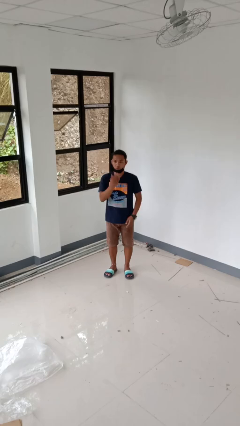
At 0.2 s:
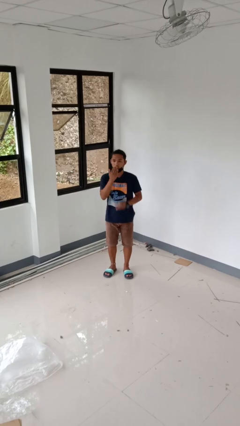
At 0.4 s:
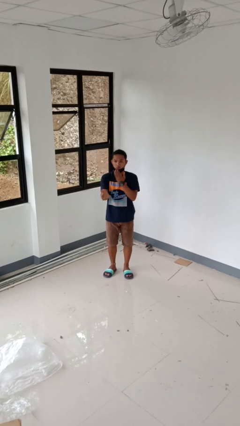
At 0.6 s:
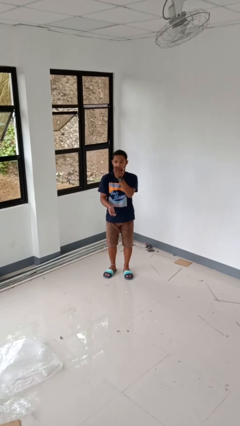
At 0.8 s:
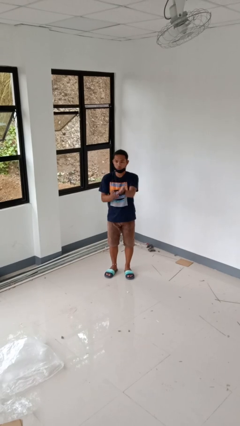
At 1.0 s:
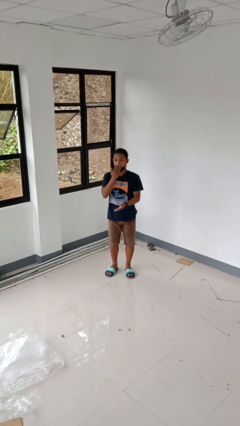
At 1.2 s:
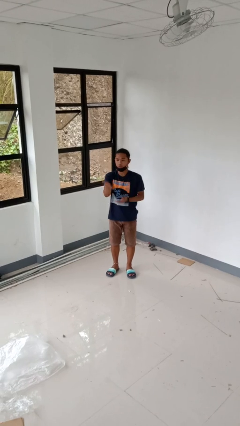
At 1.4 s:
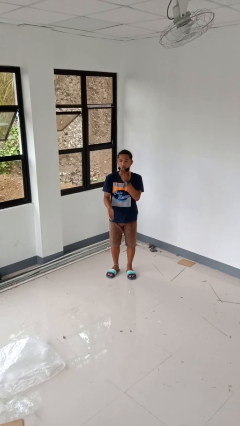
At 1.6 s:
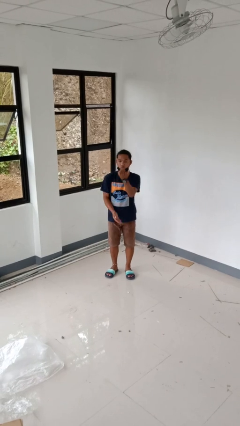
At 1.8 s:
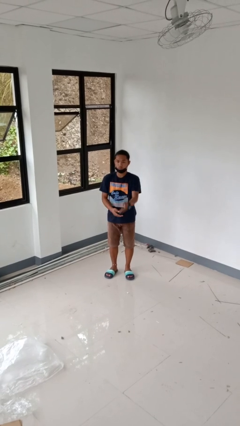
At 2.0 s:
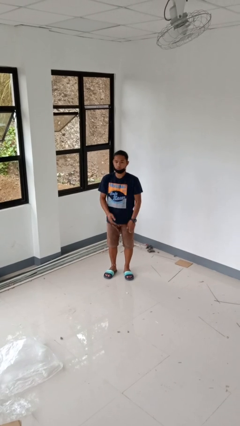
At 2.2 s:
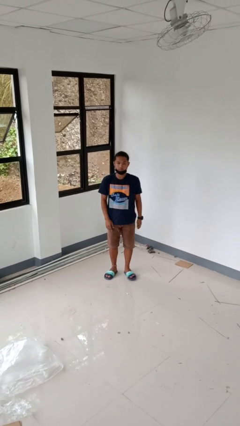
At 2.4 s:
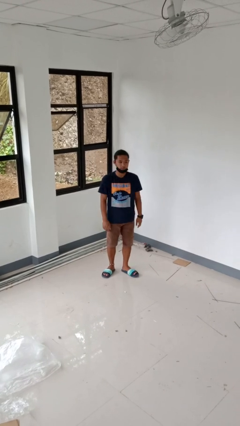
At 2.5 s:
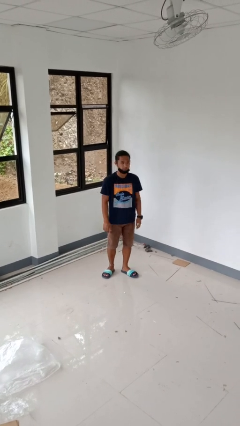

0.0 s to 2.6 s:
person gestures blow kiss

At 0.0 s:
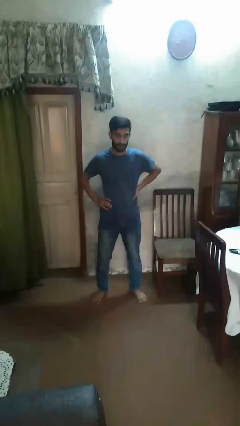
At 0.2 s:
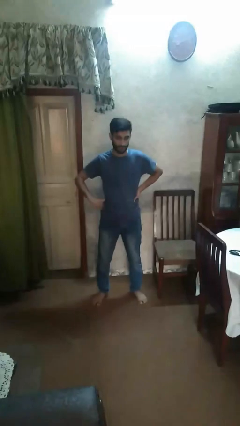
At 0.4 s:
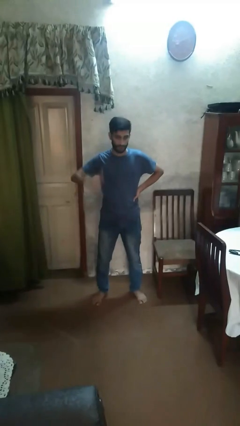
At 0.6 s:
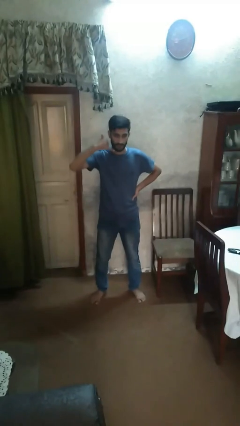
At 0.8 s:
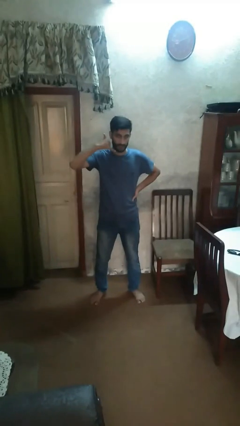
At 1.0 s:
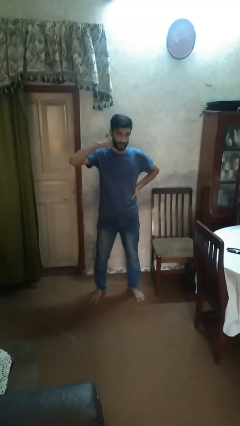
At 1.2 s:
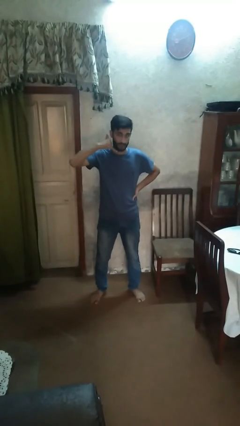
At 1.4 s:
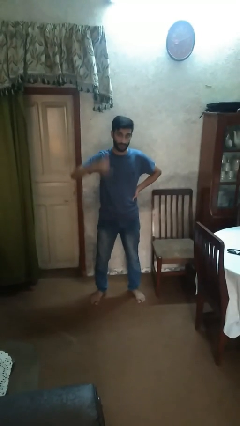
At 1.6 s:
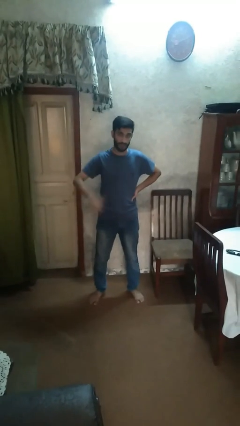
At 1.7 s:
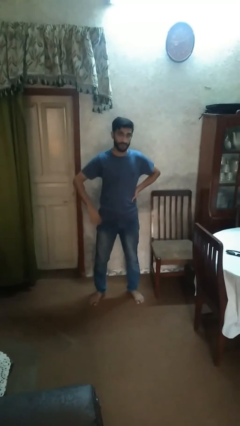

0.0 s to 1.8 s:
person gestures call me

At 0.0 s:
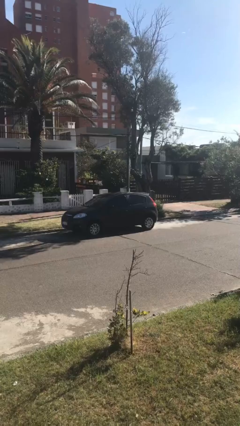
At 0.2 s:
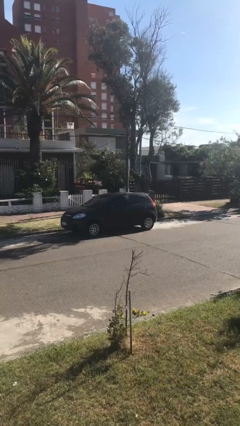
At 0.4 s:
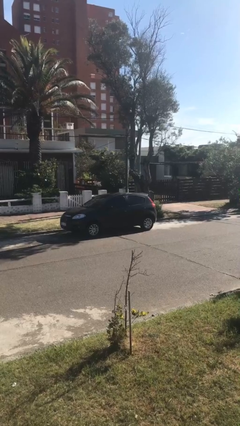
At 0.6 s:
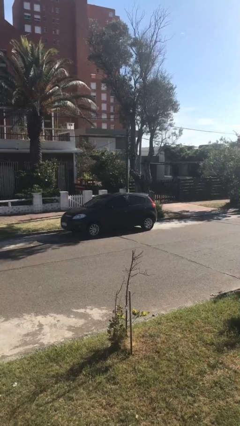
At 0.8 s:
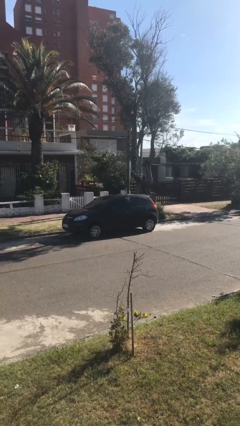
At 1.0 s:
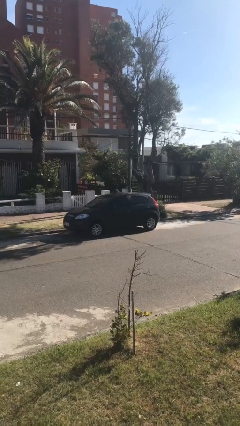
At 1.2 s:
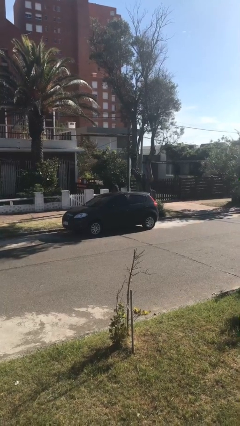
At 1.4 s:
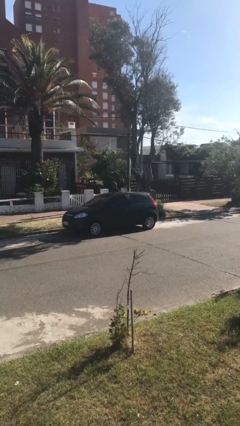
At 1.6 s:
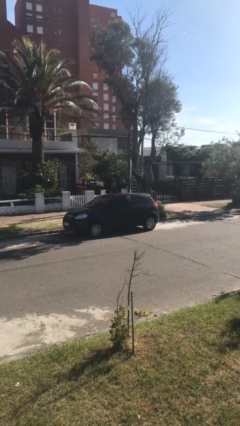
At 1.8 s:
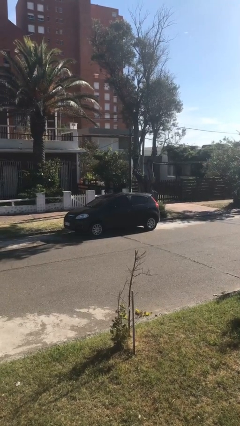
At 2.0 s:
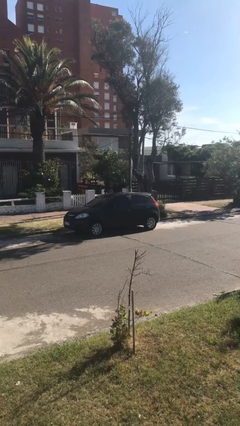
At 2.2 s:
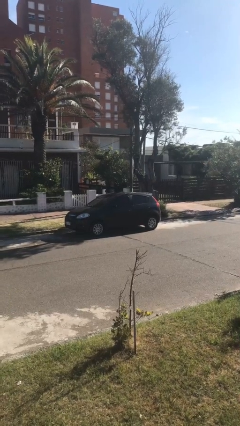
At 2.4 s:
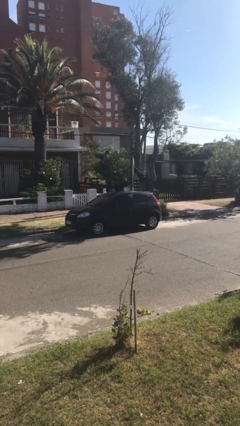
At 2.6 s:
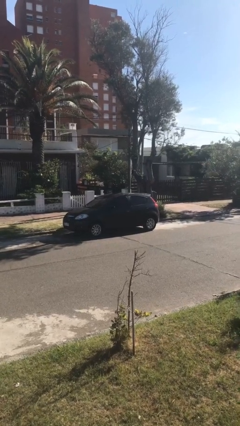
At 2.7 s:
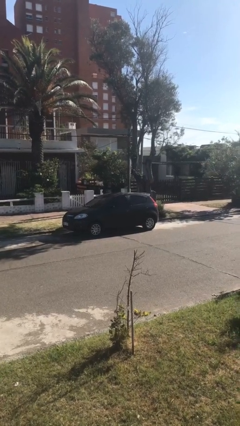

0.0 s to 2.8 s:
car drops off person

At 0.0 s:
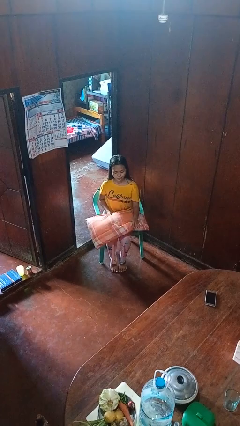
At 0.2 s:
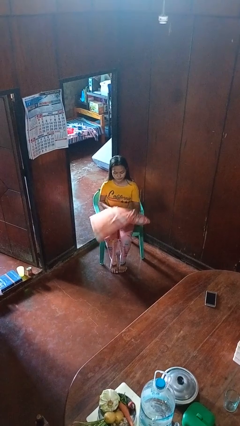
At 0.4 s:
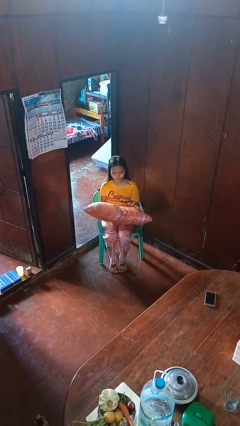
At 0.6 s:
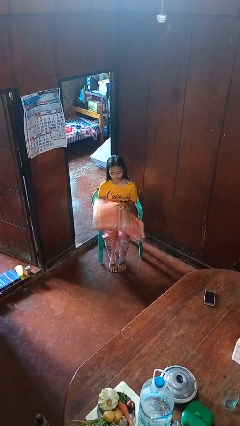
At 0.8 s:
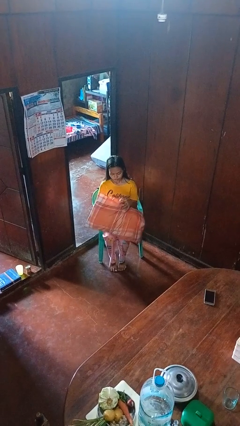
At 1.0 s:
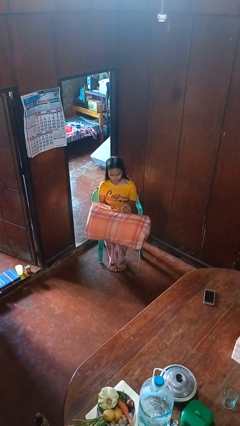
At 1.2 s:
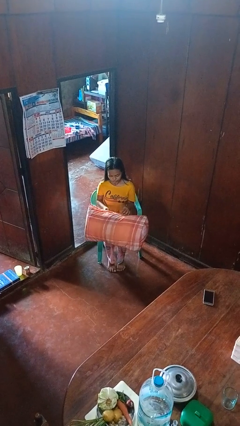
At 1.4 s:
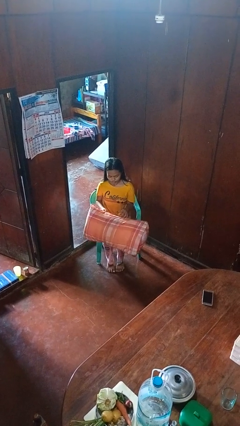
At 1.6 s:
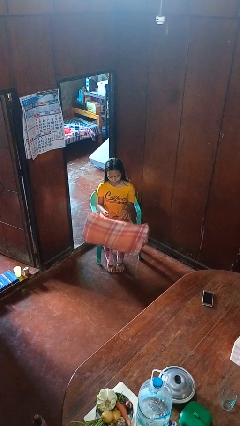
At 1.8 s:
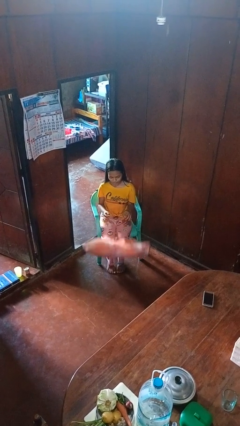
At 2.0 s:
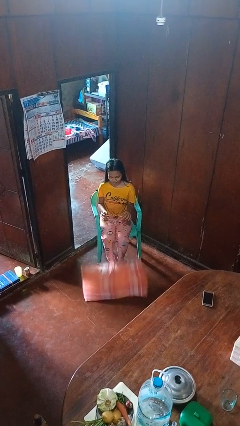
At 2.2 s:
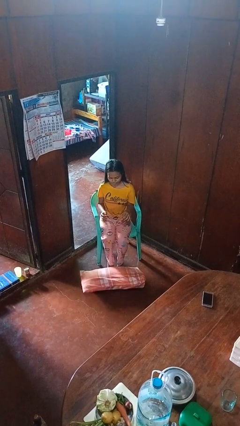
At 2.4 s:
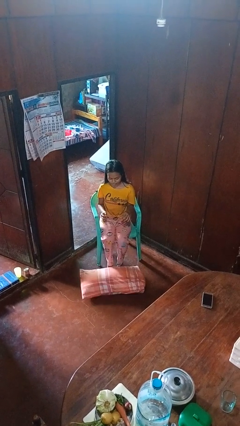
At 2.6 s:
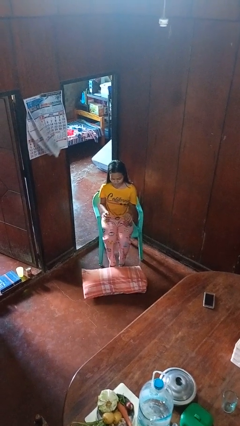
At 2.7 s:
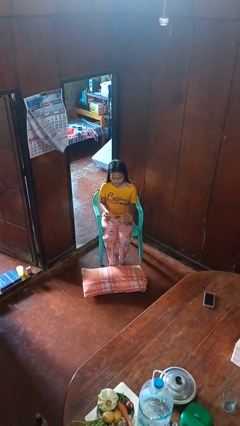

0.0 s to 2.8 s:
person drops object

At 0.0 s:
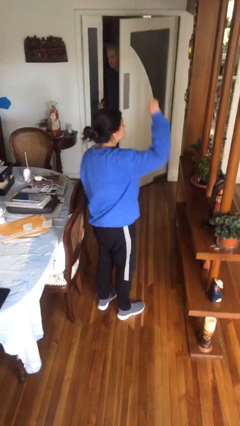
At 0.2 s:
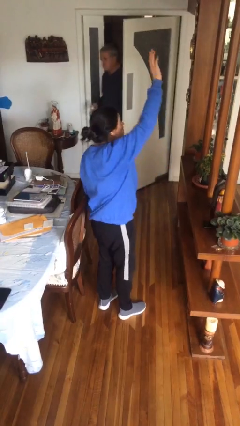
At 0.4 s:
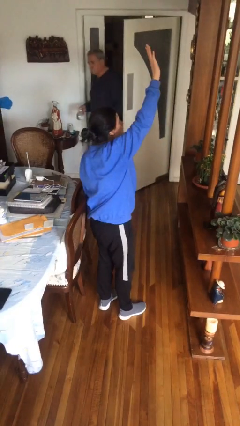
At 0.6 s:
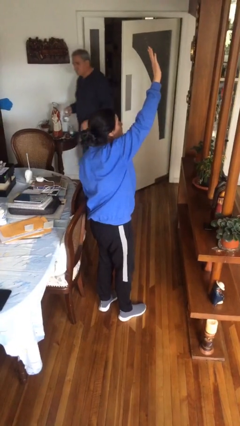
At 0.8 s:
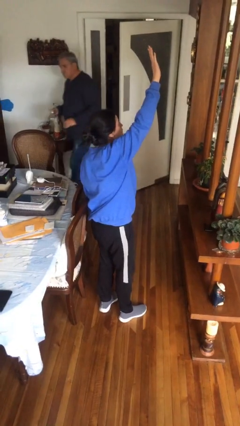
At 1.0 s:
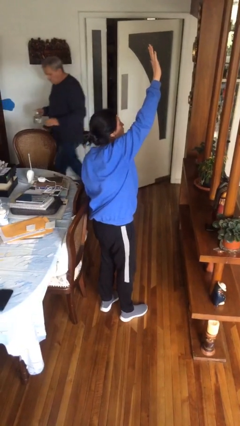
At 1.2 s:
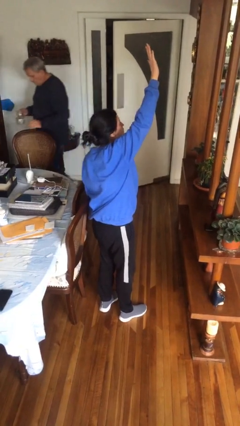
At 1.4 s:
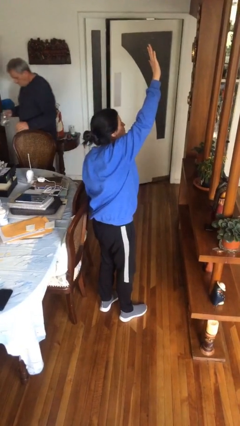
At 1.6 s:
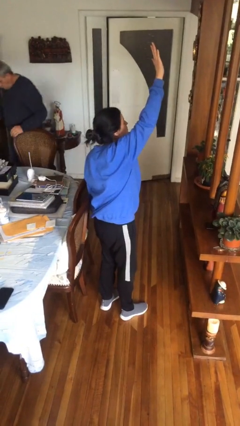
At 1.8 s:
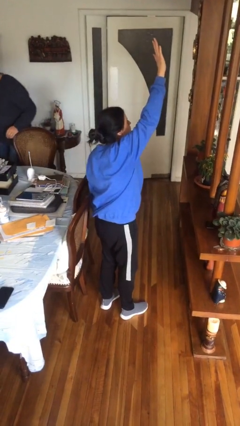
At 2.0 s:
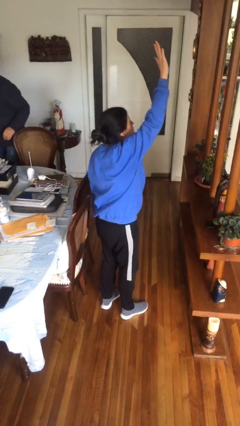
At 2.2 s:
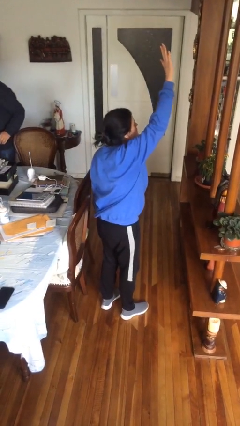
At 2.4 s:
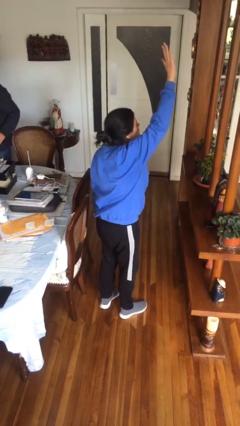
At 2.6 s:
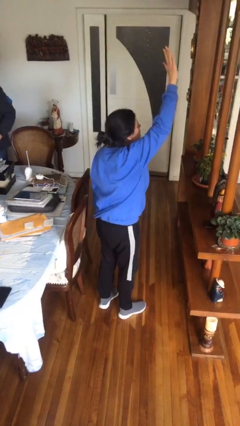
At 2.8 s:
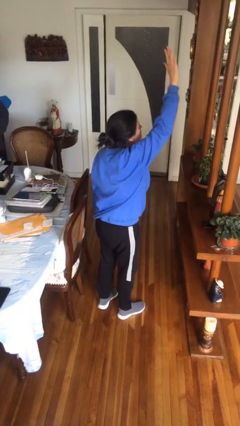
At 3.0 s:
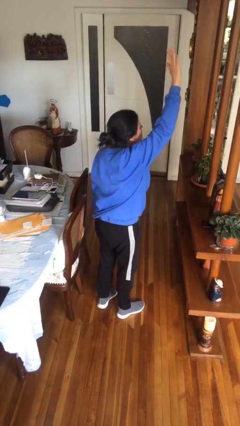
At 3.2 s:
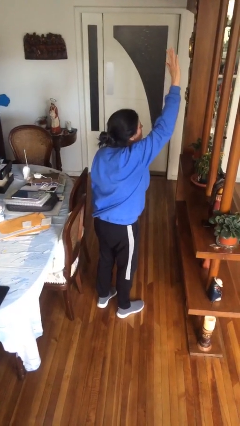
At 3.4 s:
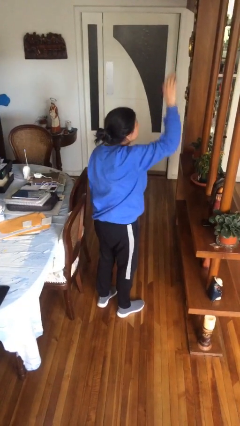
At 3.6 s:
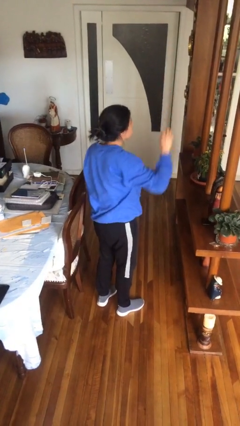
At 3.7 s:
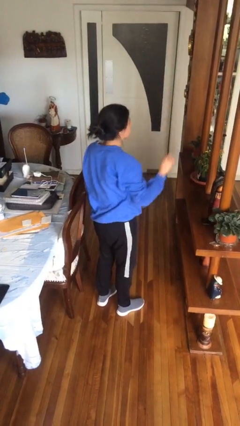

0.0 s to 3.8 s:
person gestures raise hand

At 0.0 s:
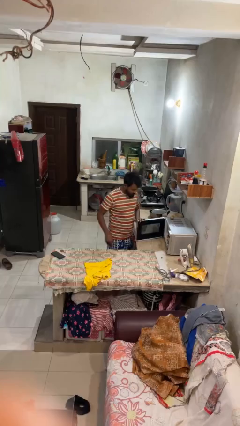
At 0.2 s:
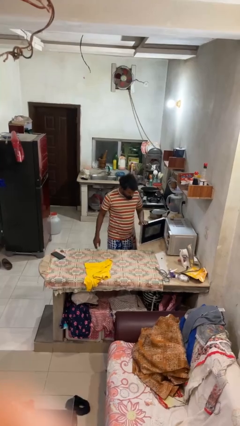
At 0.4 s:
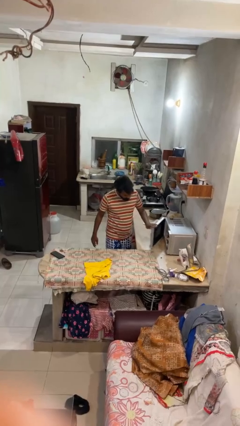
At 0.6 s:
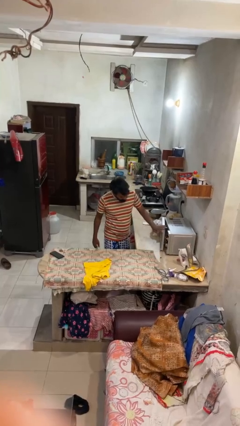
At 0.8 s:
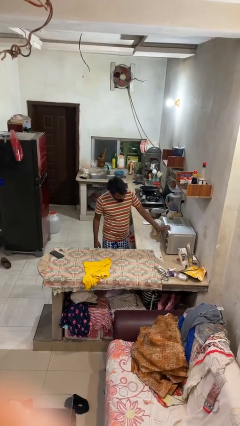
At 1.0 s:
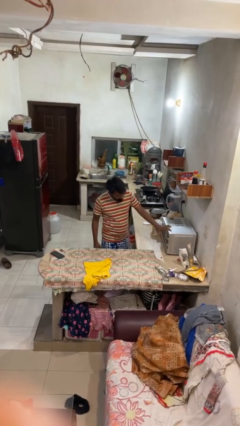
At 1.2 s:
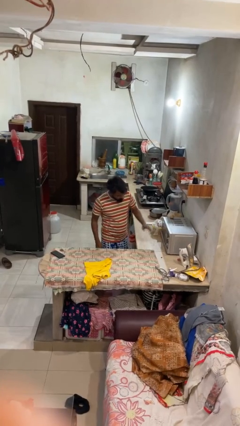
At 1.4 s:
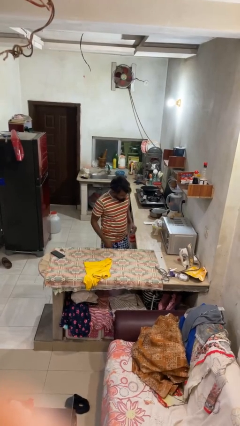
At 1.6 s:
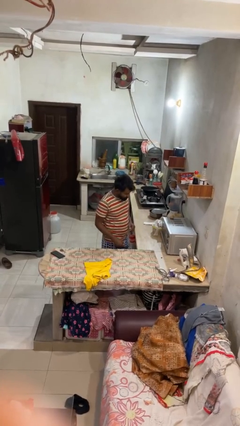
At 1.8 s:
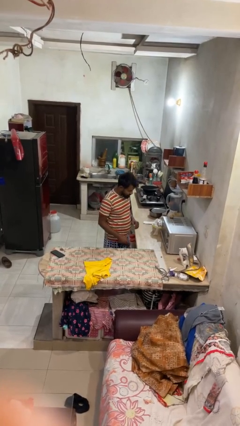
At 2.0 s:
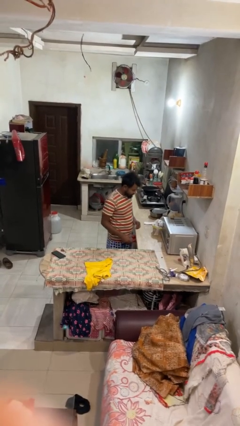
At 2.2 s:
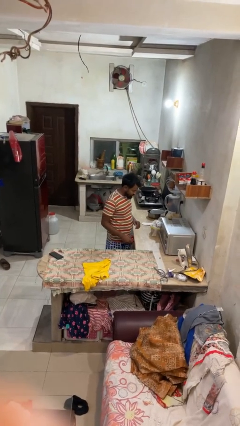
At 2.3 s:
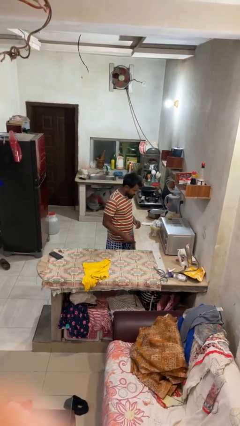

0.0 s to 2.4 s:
person closes microwave

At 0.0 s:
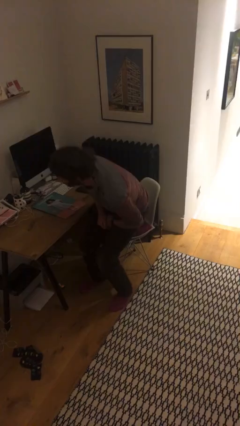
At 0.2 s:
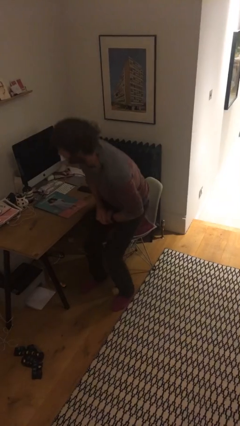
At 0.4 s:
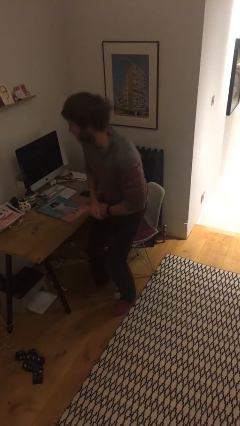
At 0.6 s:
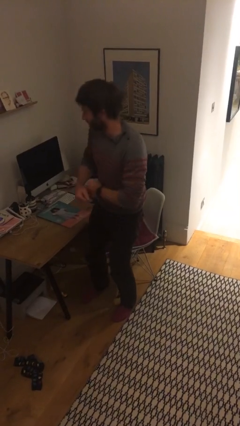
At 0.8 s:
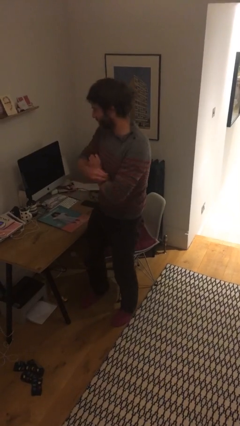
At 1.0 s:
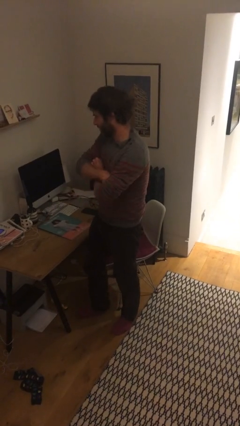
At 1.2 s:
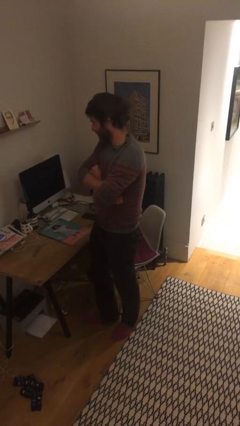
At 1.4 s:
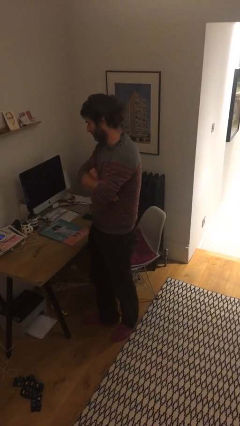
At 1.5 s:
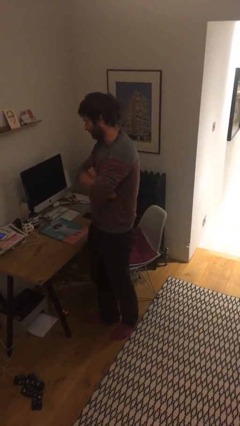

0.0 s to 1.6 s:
person stands up
